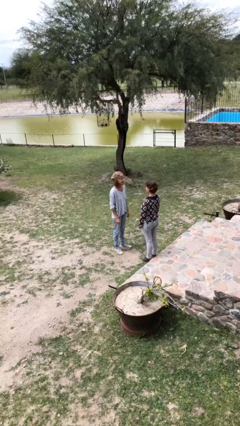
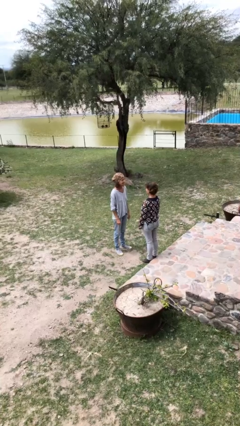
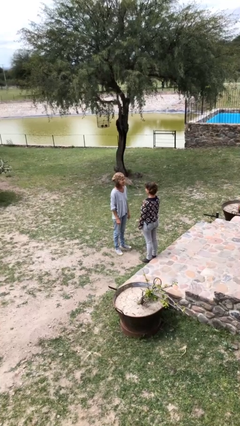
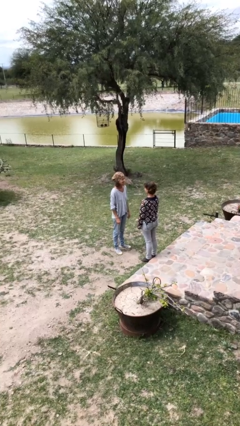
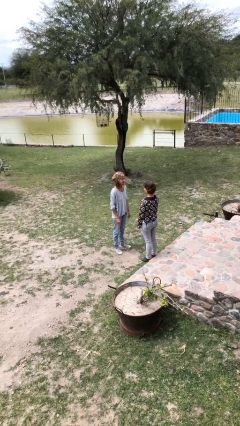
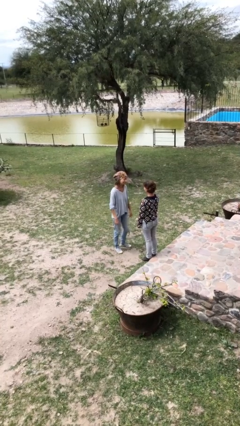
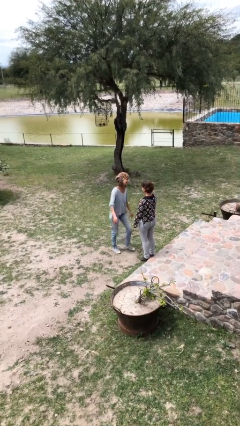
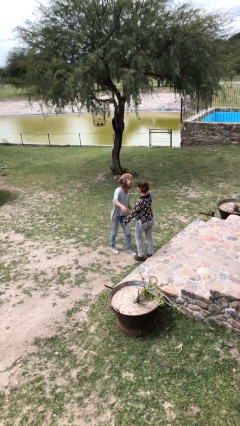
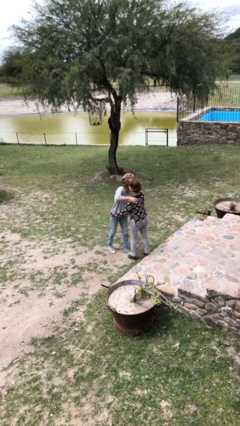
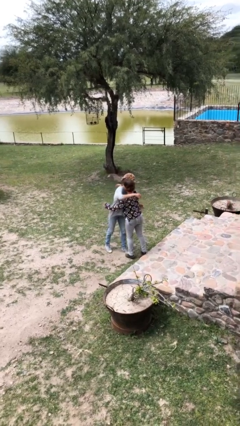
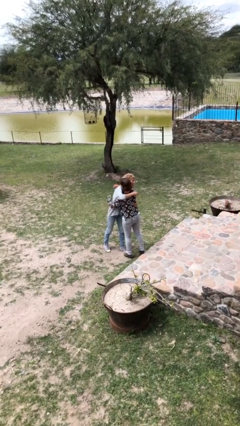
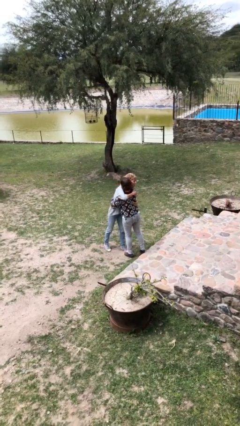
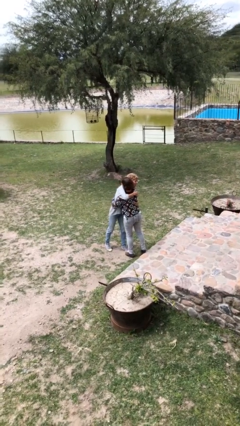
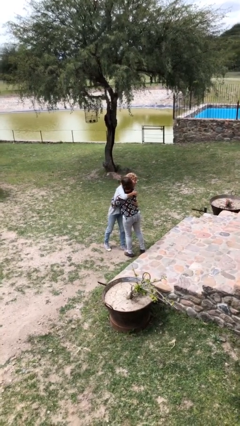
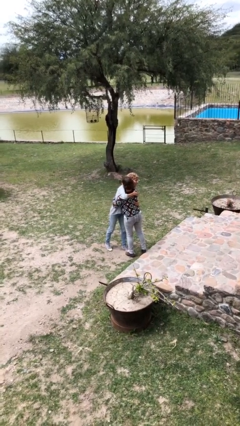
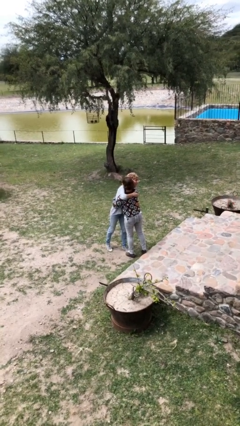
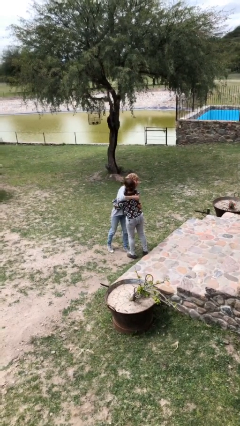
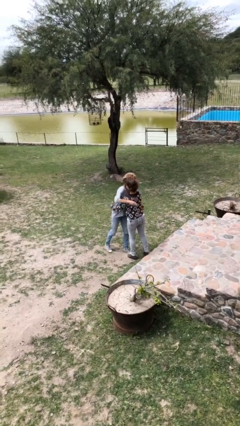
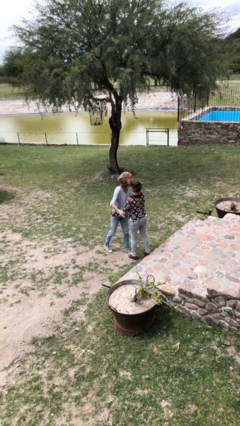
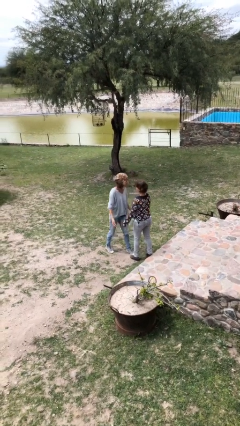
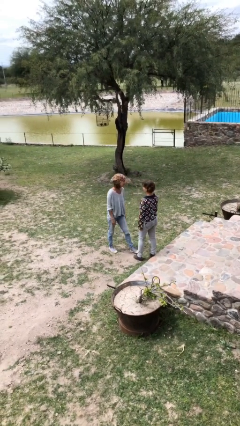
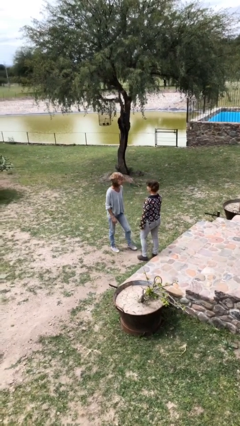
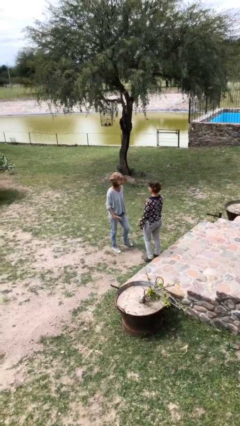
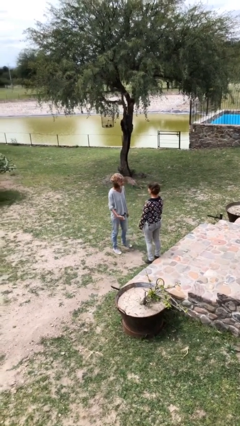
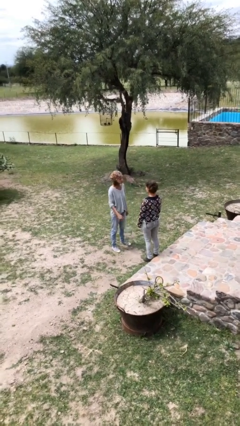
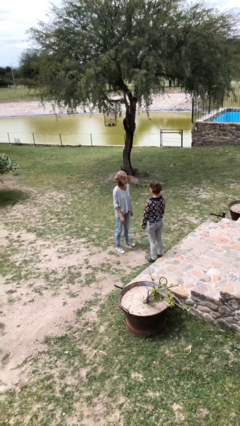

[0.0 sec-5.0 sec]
person embraces person

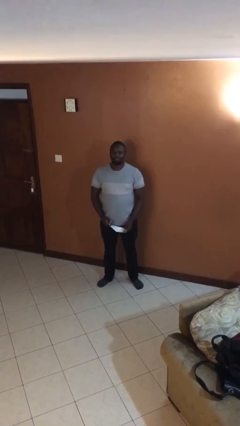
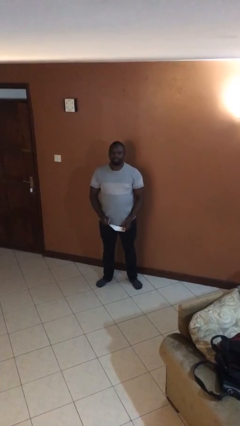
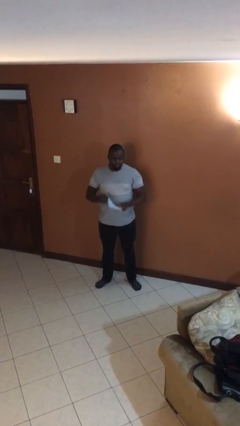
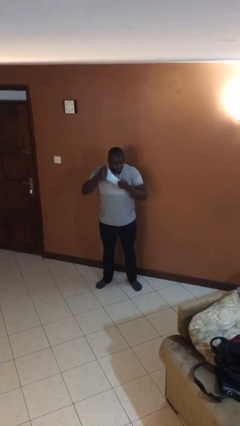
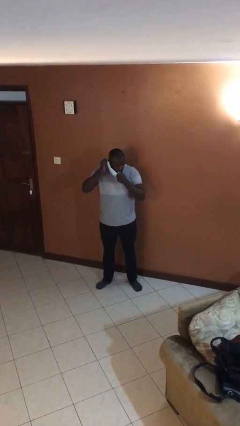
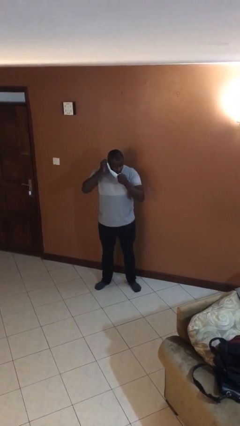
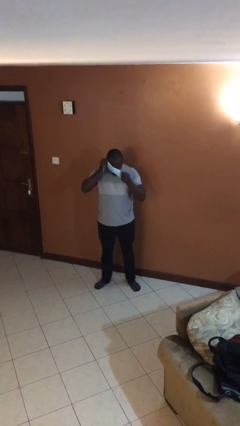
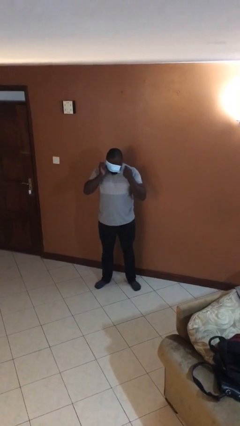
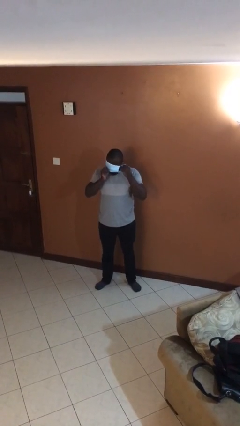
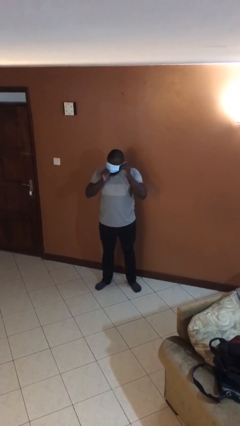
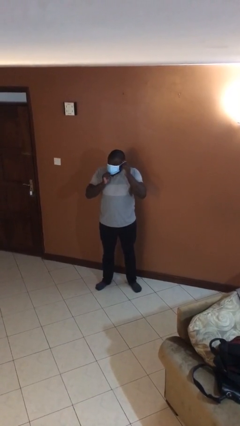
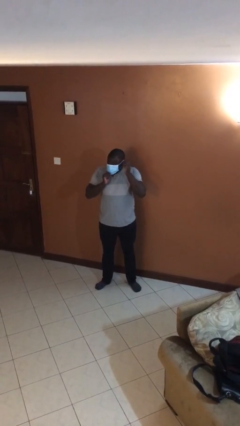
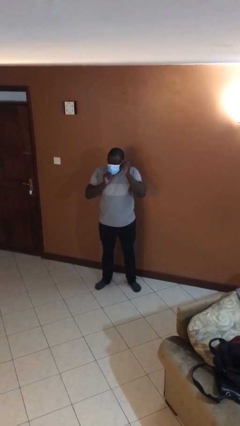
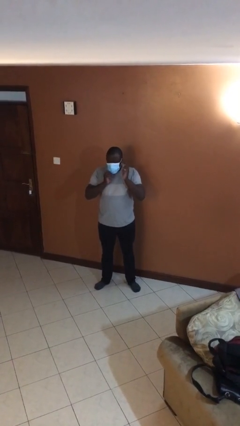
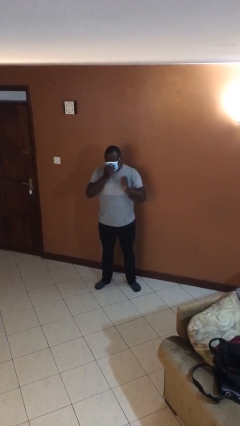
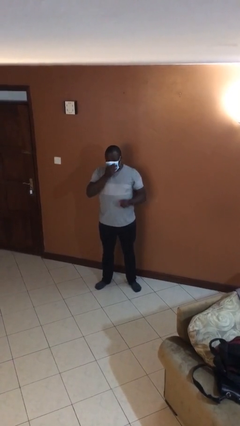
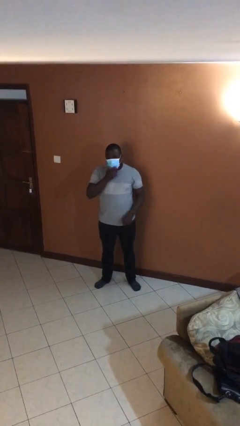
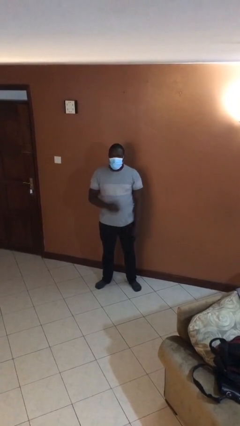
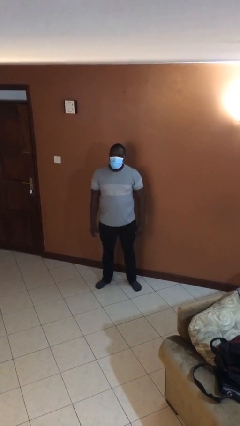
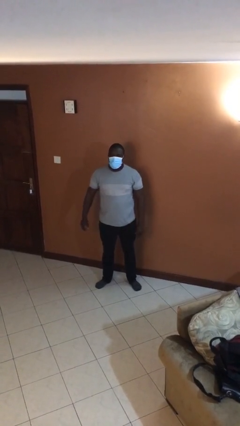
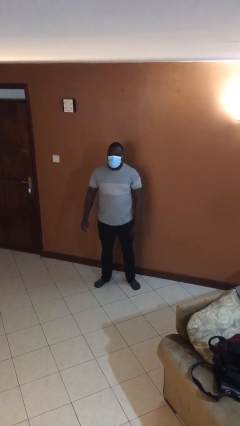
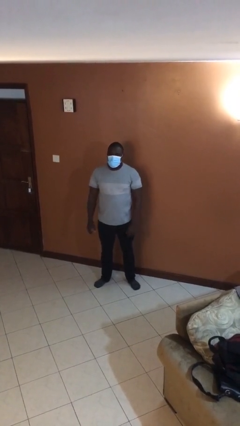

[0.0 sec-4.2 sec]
person puts on facemask

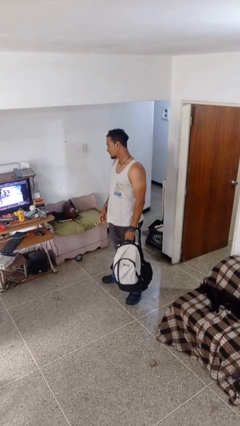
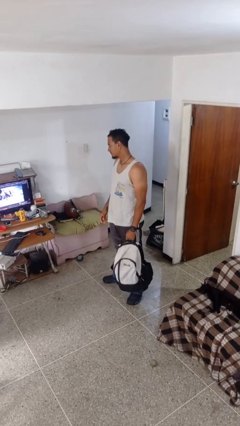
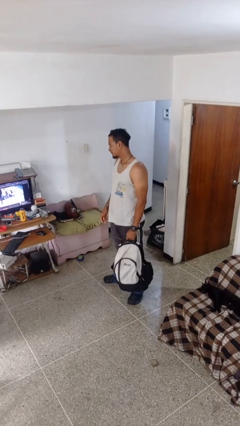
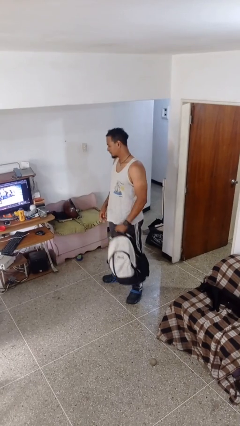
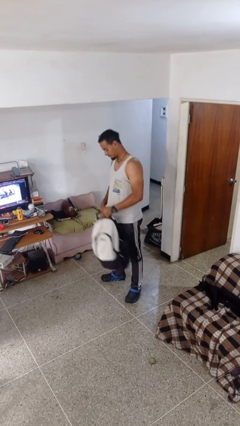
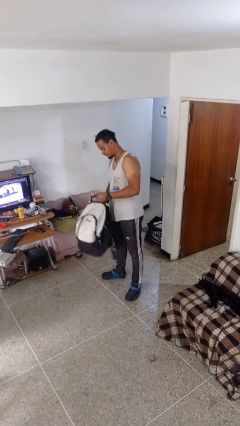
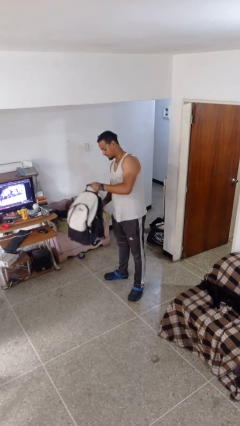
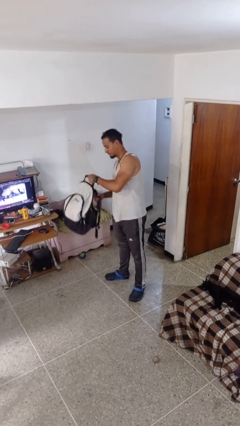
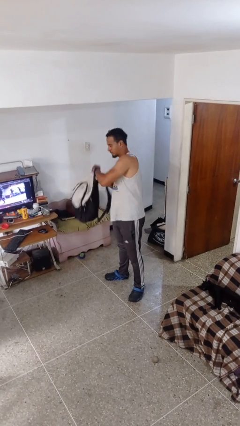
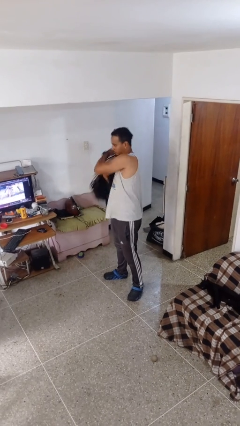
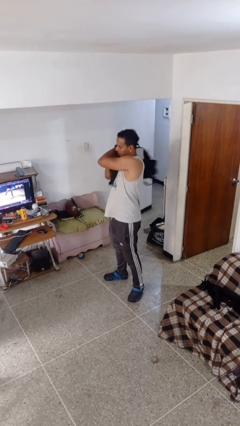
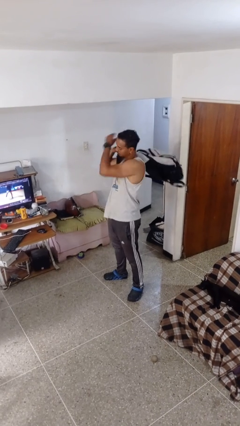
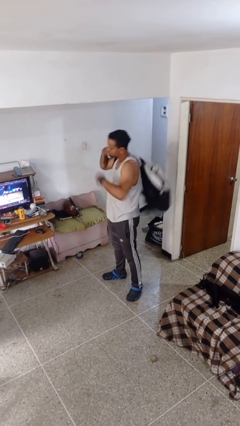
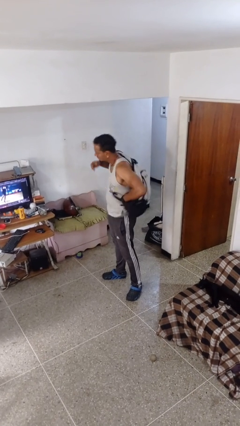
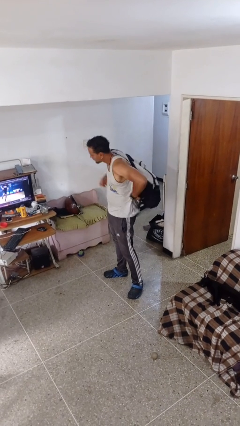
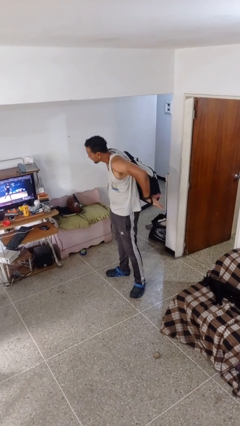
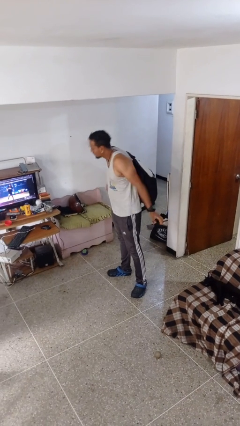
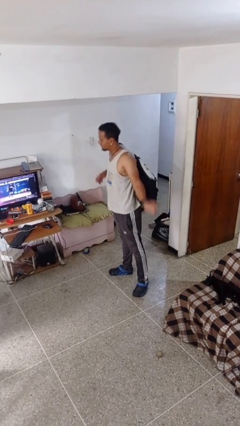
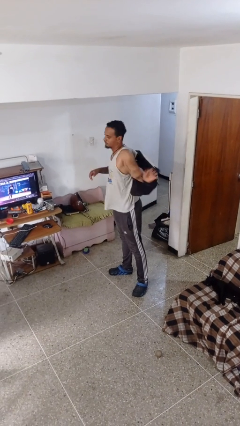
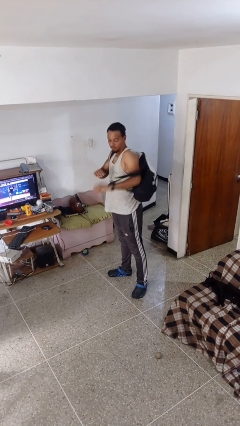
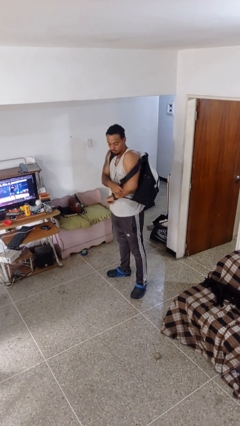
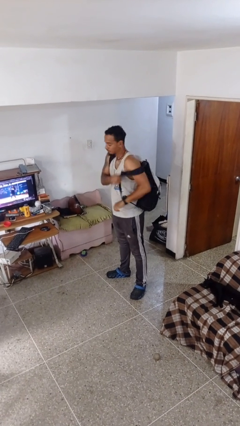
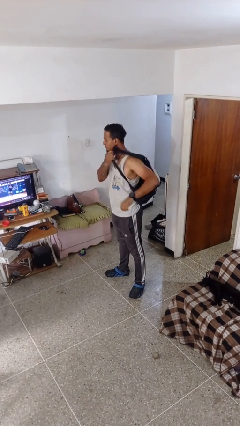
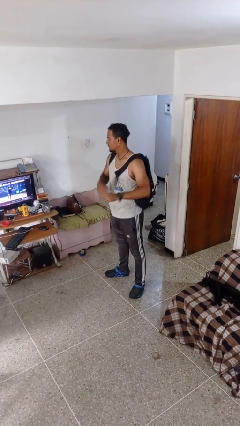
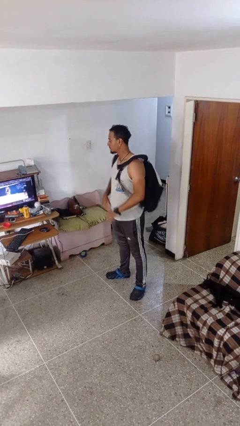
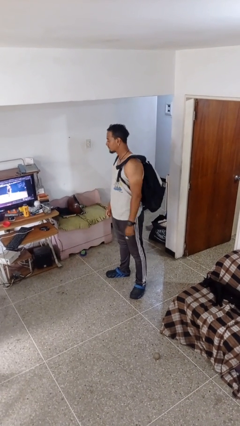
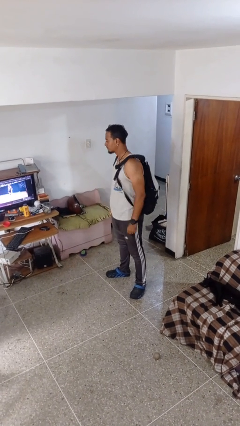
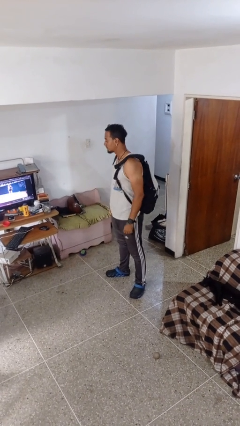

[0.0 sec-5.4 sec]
person puts on backpack

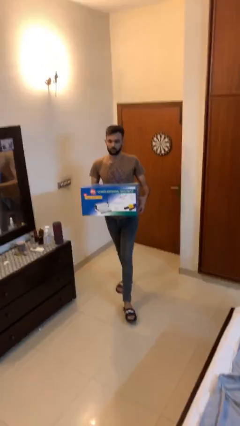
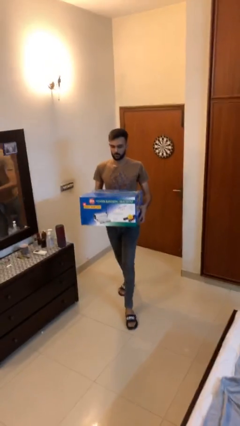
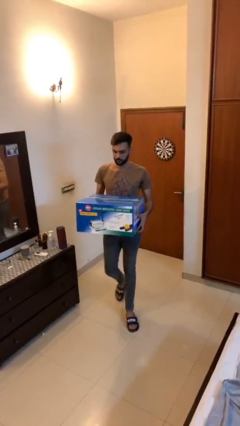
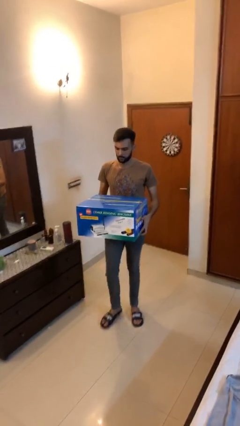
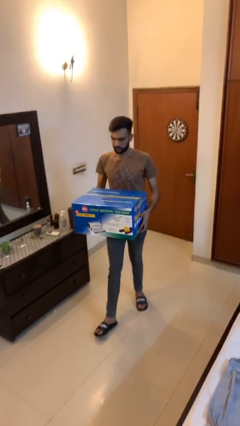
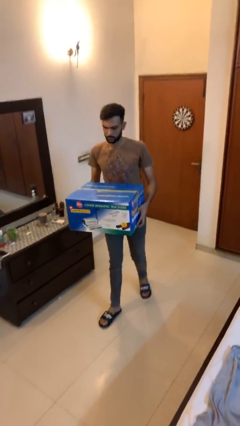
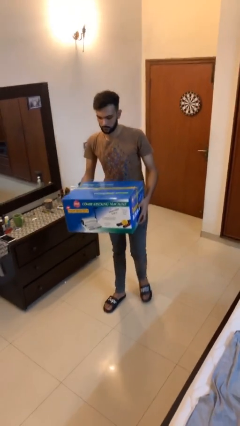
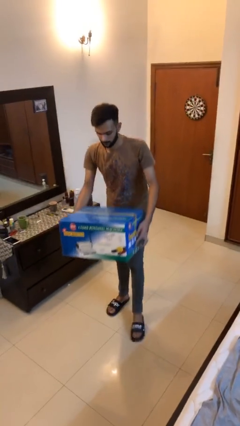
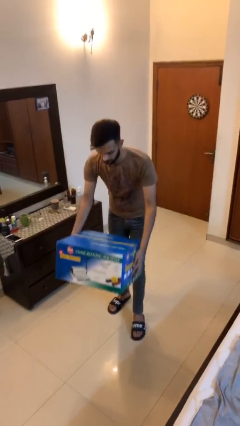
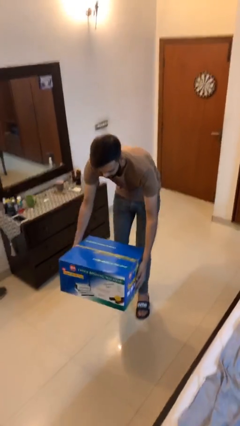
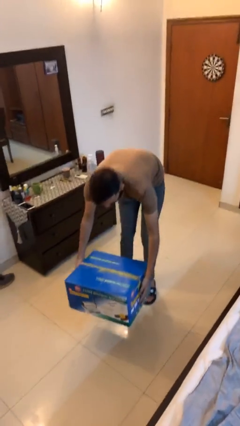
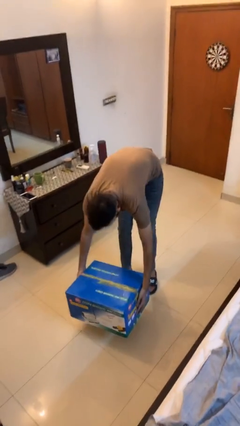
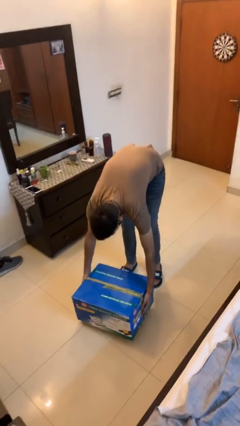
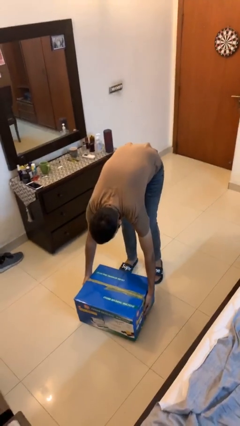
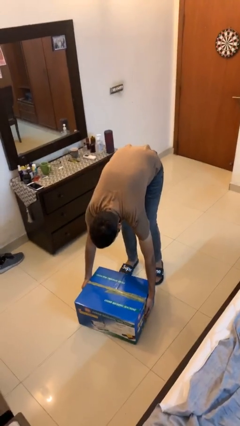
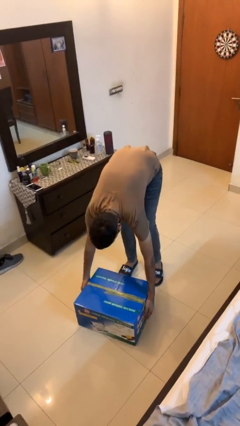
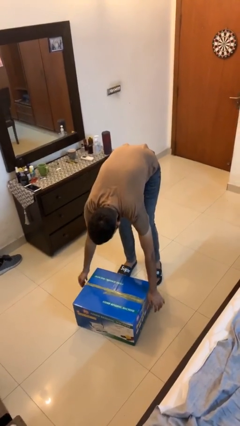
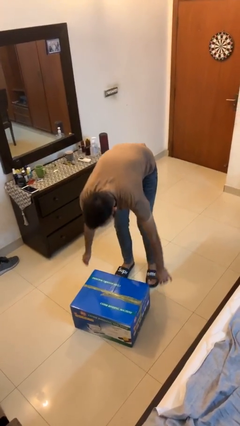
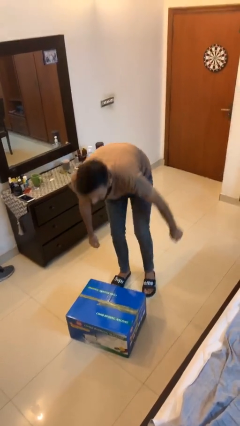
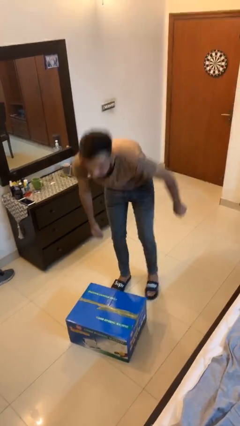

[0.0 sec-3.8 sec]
person puts down object on floor
